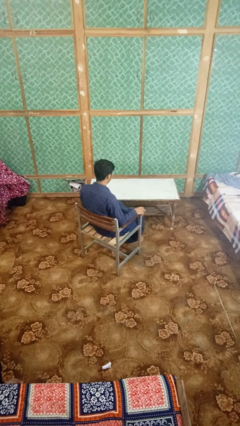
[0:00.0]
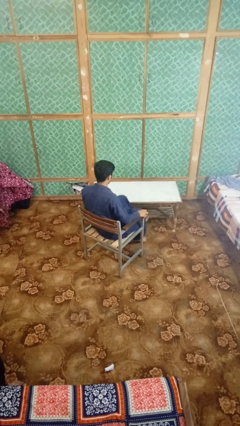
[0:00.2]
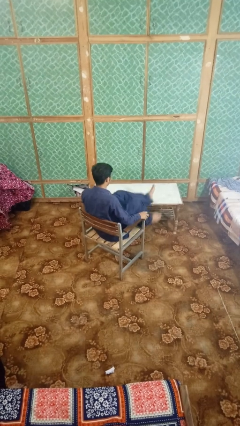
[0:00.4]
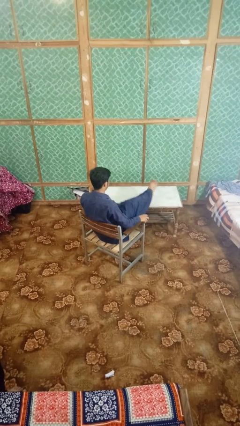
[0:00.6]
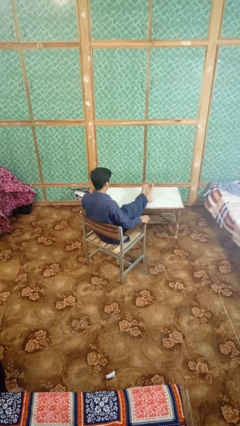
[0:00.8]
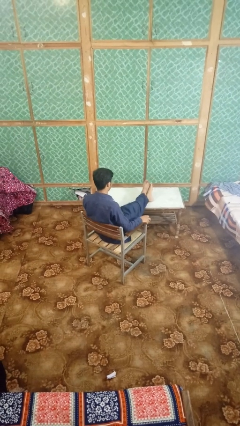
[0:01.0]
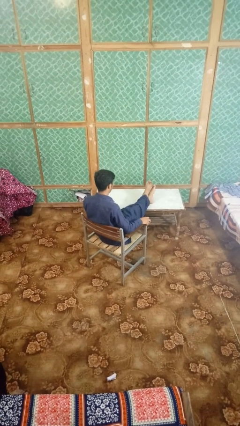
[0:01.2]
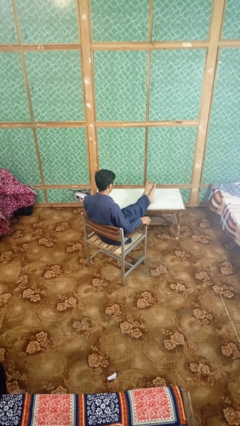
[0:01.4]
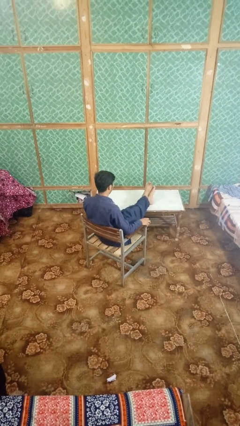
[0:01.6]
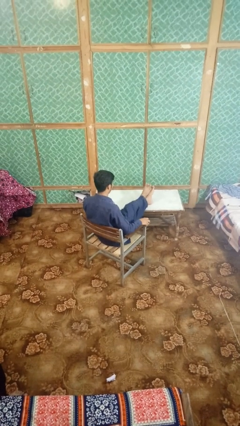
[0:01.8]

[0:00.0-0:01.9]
person puts feet up

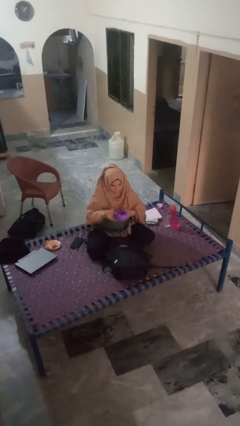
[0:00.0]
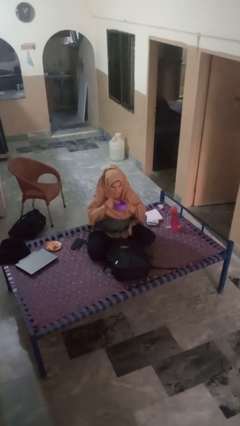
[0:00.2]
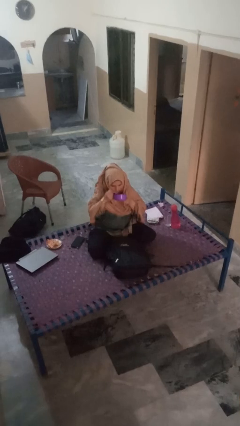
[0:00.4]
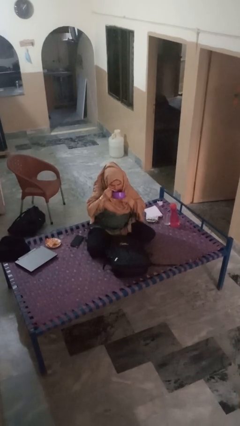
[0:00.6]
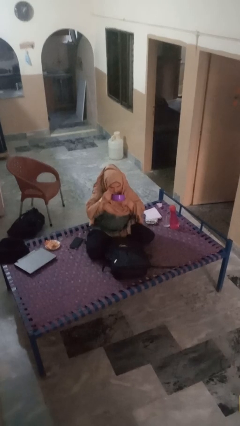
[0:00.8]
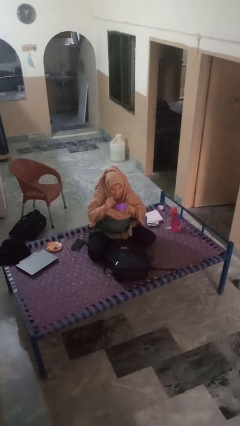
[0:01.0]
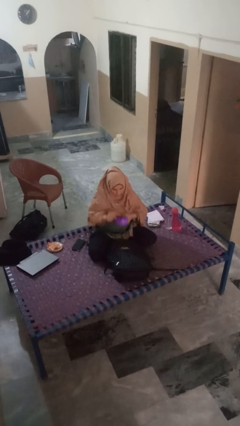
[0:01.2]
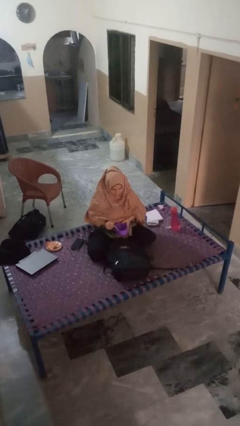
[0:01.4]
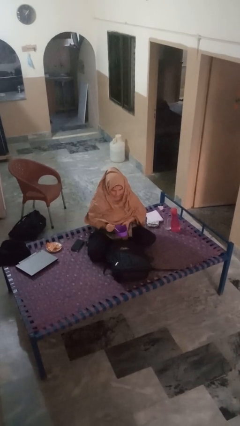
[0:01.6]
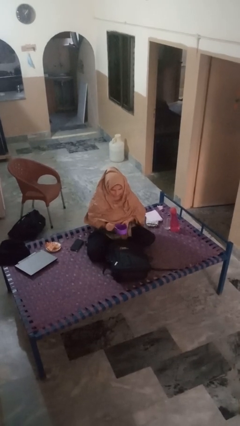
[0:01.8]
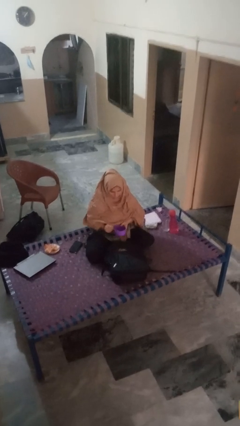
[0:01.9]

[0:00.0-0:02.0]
person eats snack from bag

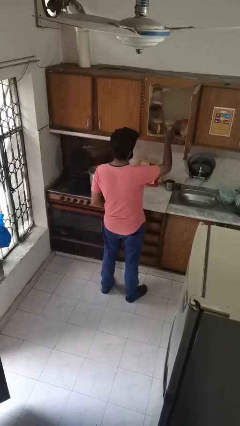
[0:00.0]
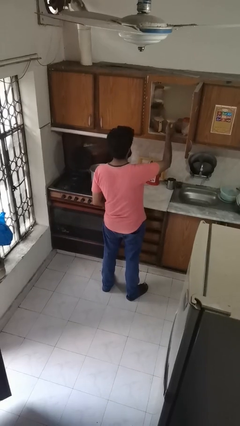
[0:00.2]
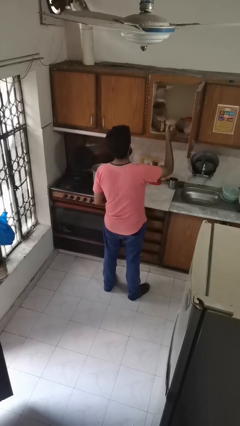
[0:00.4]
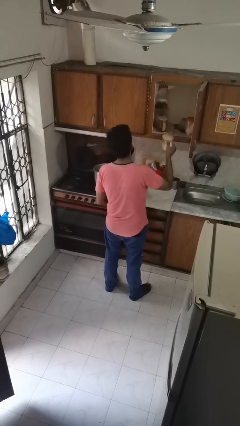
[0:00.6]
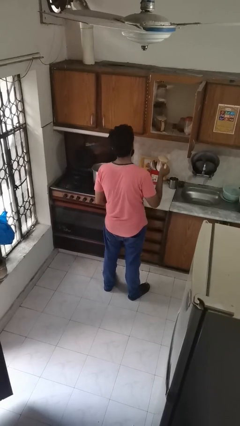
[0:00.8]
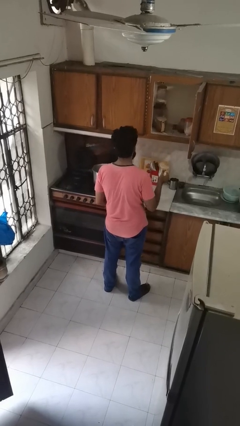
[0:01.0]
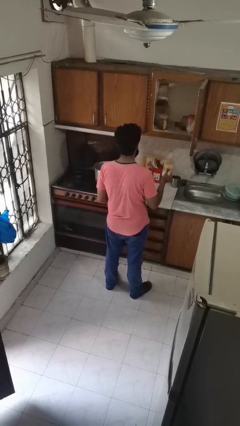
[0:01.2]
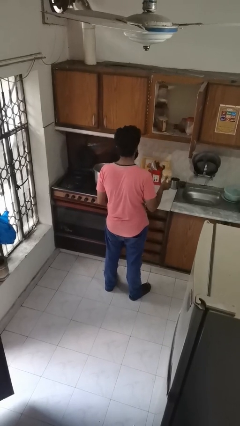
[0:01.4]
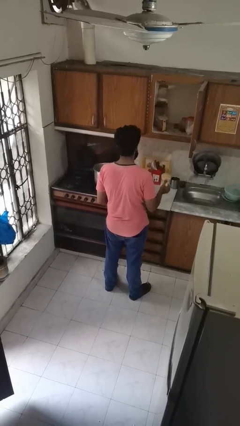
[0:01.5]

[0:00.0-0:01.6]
person picks up object from cabinet

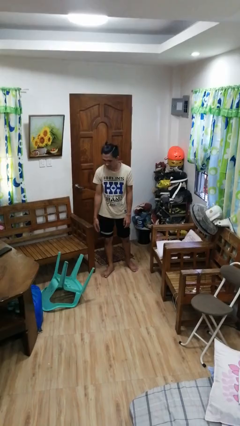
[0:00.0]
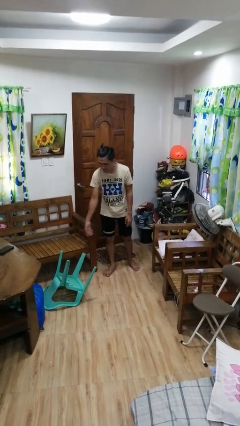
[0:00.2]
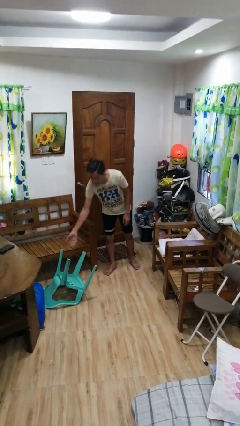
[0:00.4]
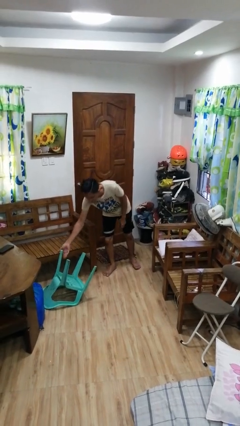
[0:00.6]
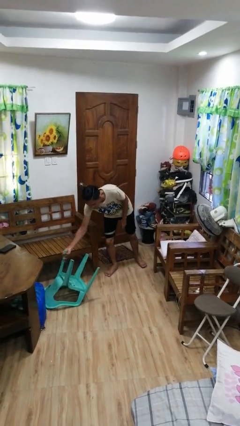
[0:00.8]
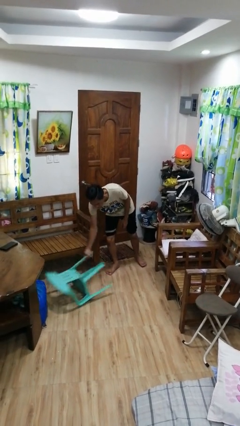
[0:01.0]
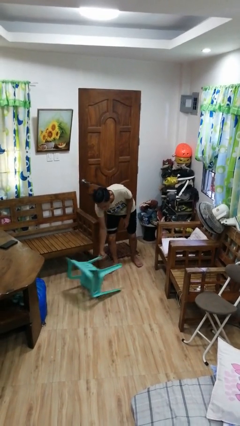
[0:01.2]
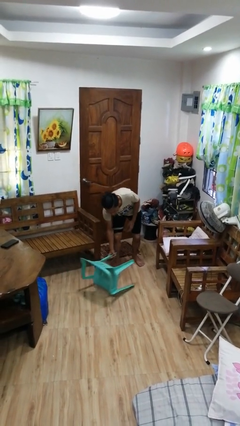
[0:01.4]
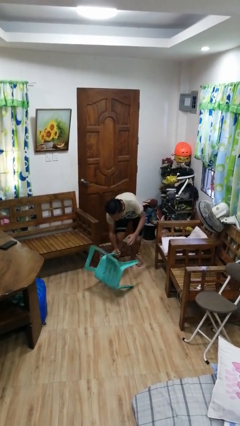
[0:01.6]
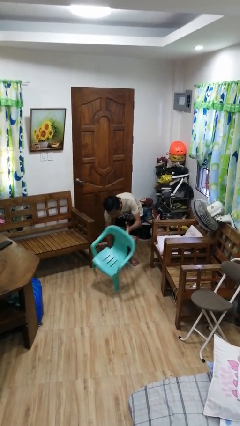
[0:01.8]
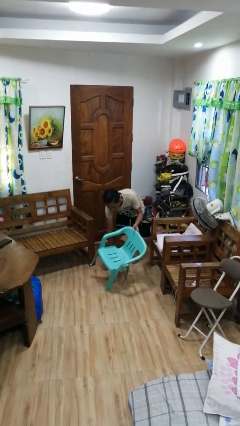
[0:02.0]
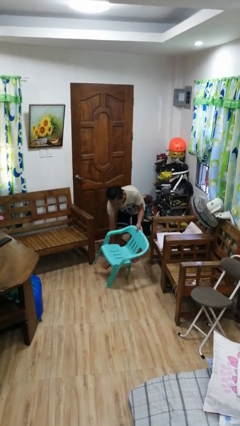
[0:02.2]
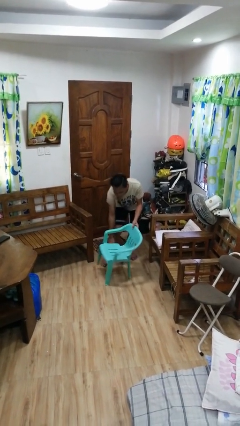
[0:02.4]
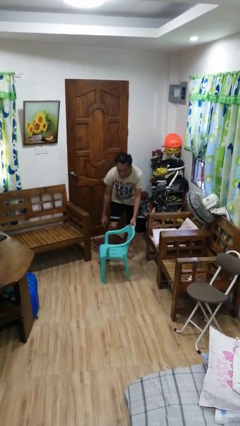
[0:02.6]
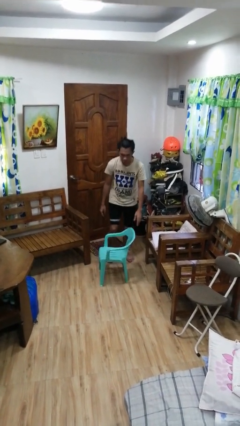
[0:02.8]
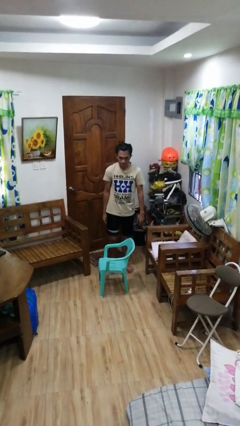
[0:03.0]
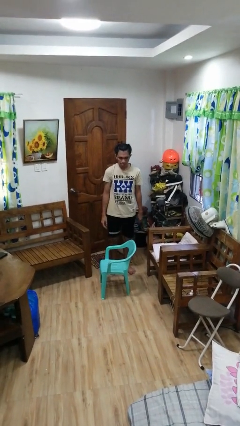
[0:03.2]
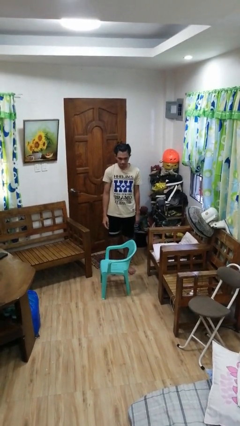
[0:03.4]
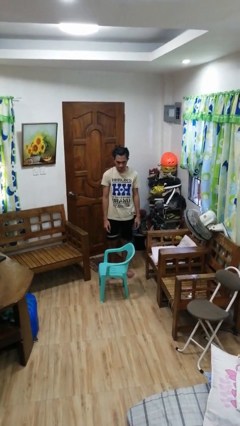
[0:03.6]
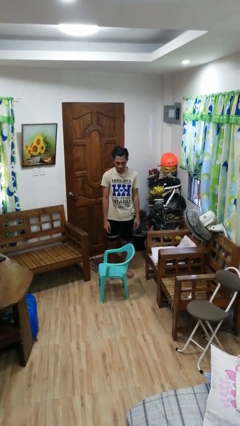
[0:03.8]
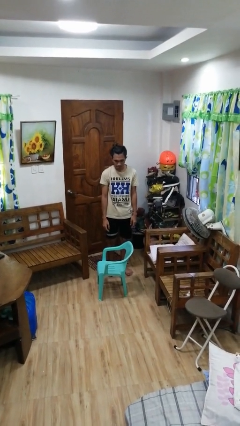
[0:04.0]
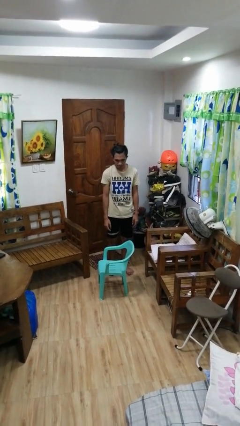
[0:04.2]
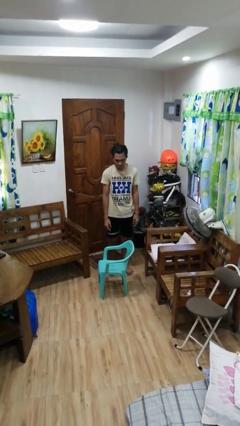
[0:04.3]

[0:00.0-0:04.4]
person sets upright furniture

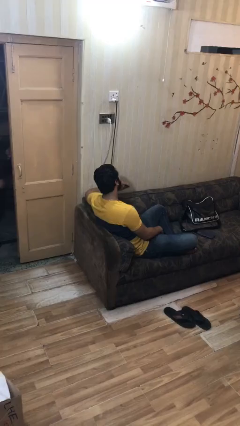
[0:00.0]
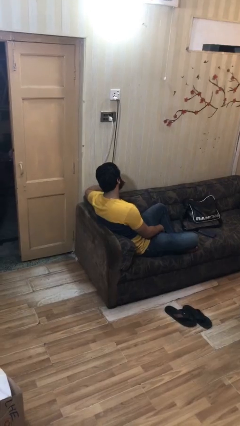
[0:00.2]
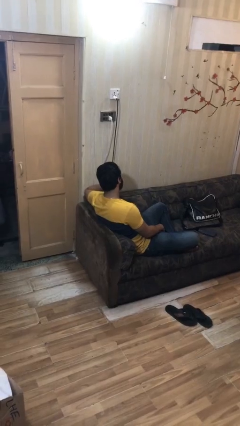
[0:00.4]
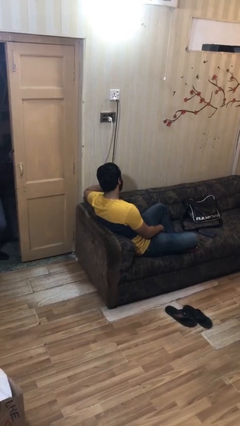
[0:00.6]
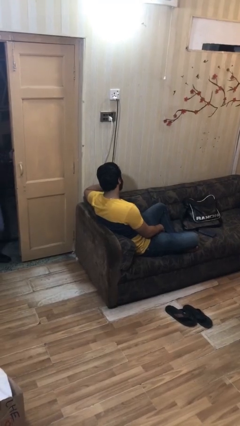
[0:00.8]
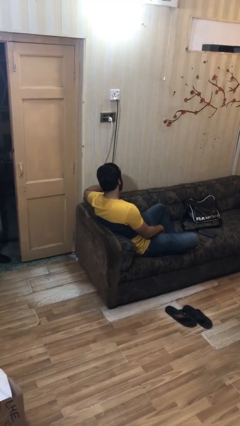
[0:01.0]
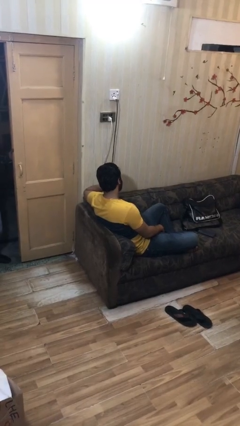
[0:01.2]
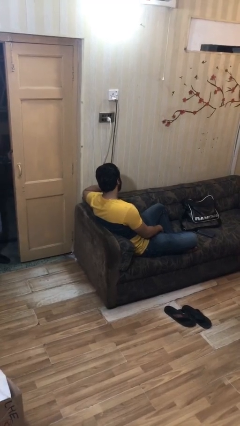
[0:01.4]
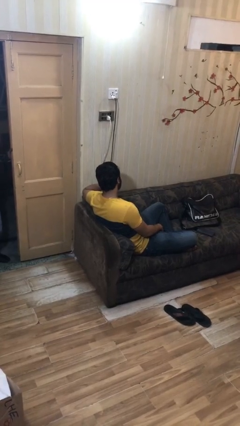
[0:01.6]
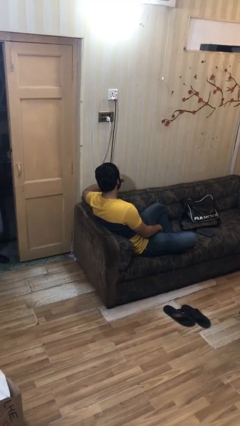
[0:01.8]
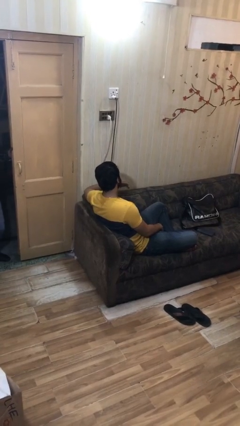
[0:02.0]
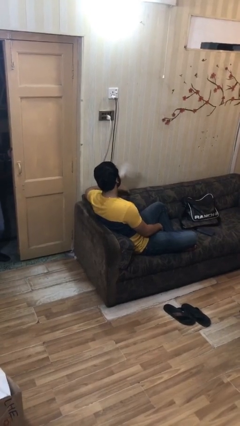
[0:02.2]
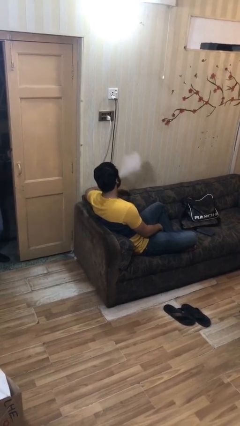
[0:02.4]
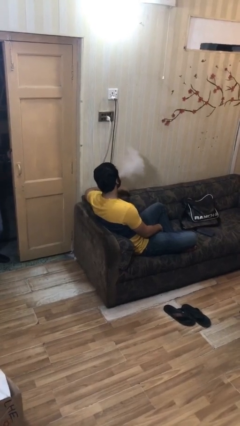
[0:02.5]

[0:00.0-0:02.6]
person vapes

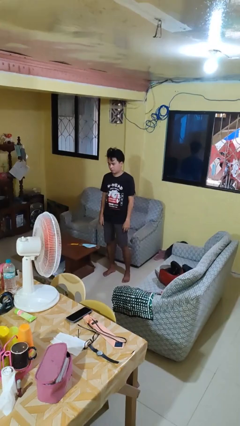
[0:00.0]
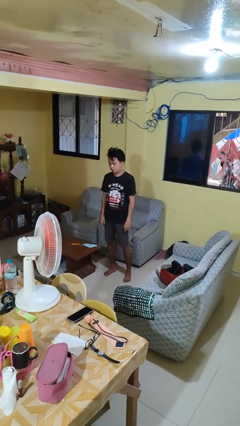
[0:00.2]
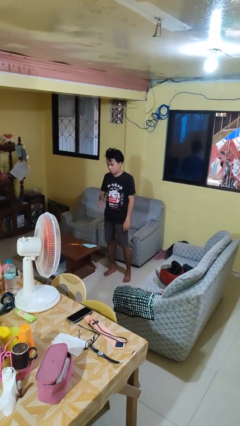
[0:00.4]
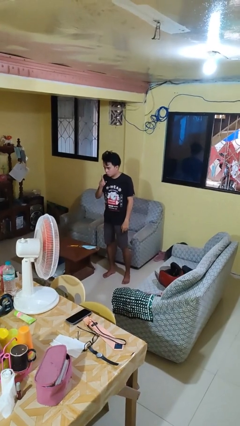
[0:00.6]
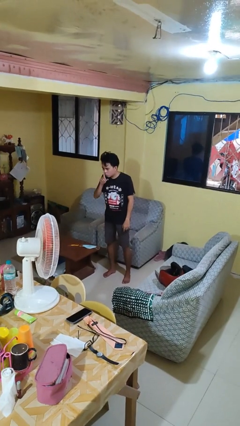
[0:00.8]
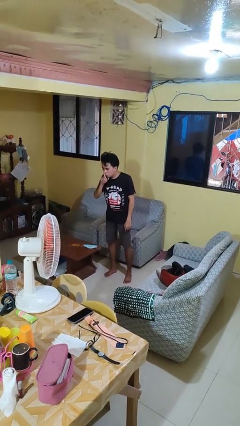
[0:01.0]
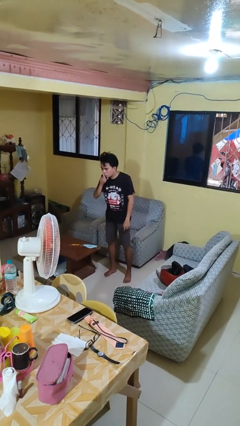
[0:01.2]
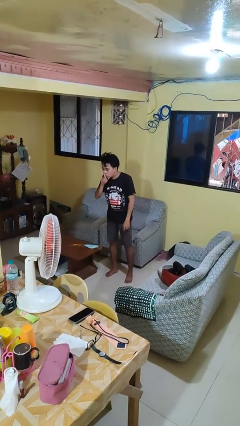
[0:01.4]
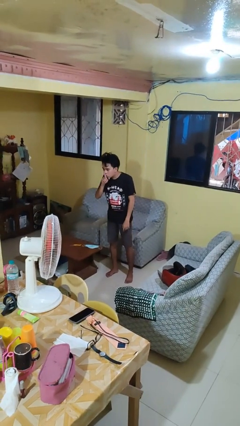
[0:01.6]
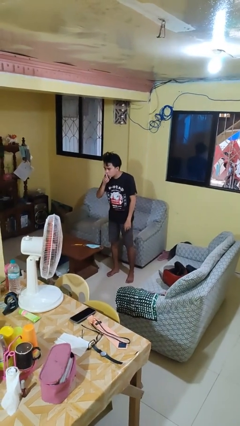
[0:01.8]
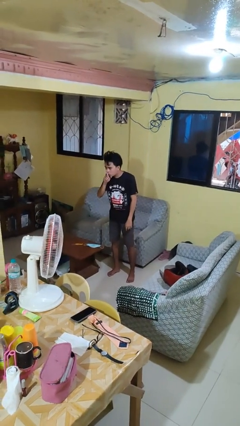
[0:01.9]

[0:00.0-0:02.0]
person gestures be quiet

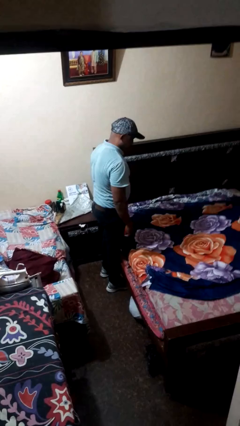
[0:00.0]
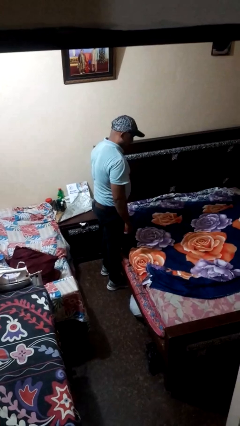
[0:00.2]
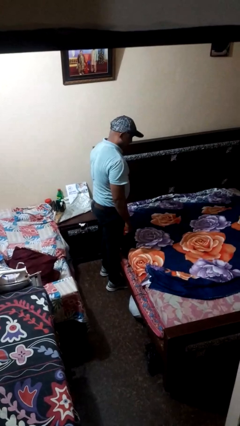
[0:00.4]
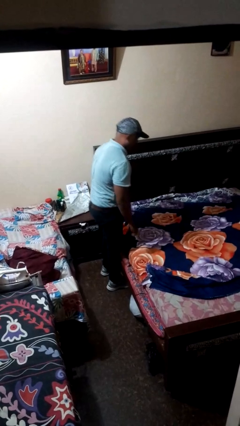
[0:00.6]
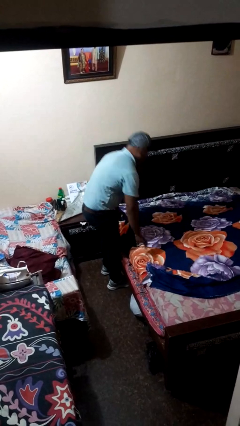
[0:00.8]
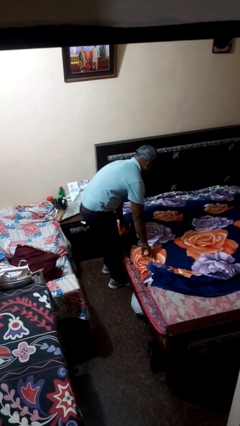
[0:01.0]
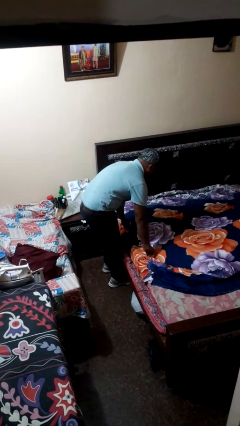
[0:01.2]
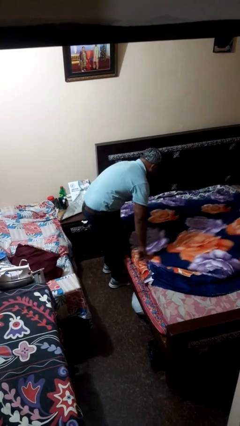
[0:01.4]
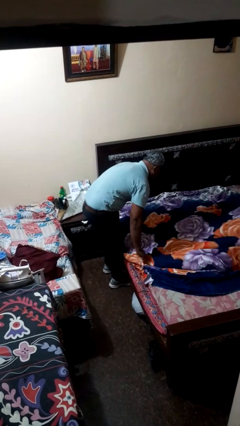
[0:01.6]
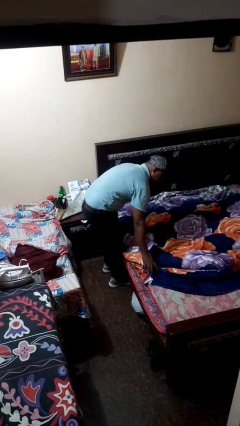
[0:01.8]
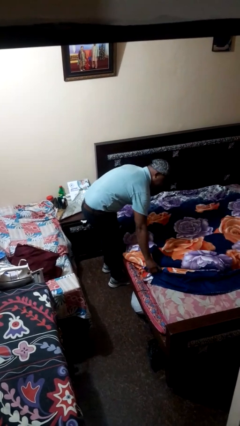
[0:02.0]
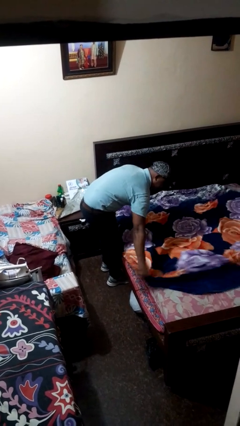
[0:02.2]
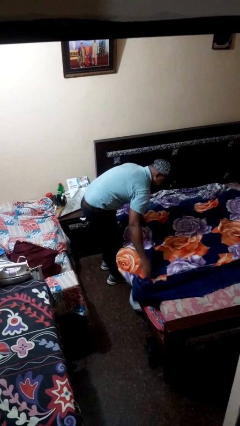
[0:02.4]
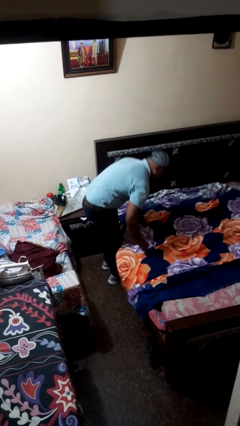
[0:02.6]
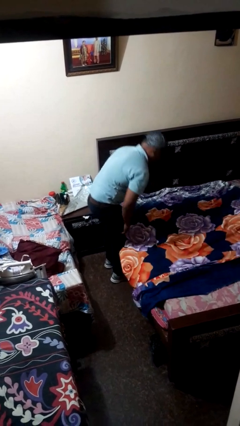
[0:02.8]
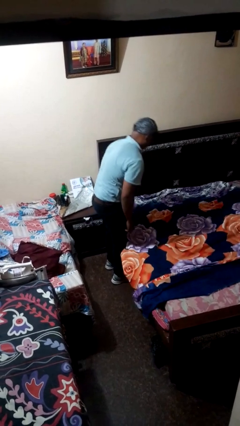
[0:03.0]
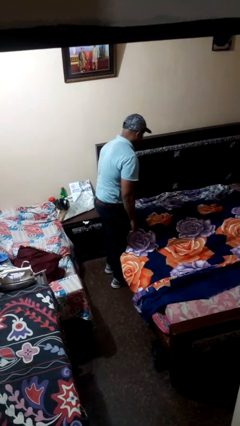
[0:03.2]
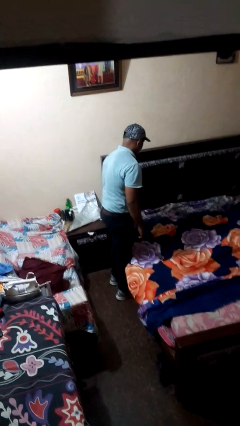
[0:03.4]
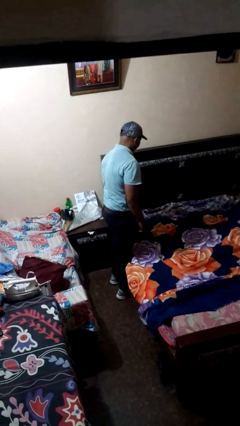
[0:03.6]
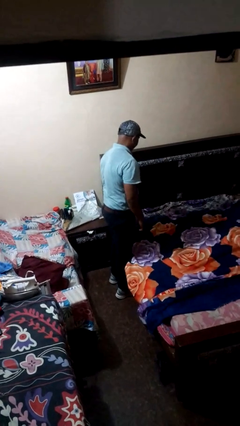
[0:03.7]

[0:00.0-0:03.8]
person makes bed
